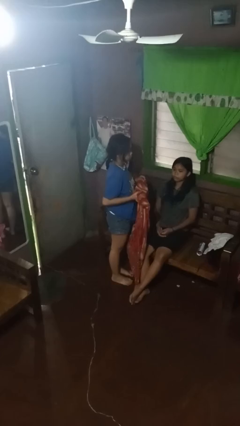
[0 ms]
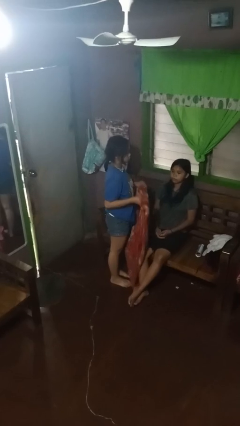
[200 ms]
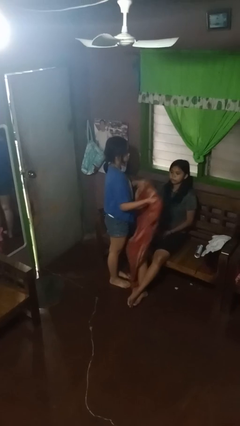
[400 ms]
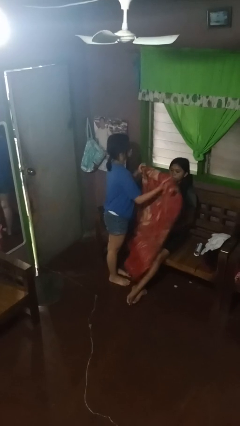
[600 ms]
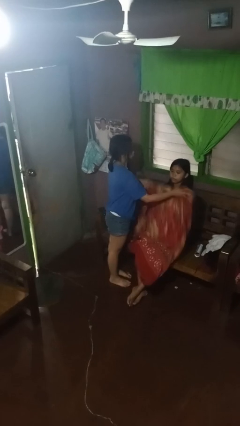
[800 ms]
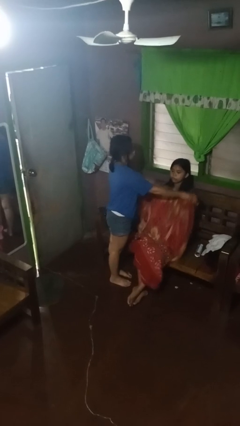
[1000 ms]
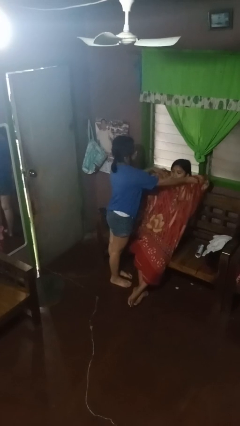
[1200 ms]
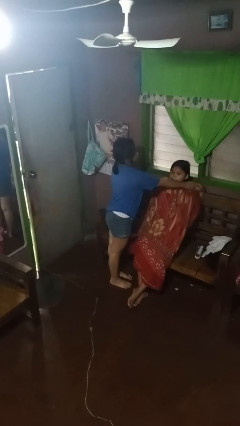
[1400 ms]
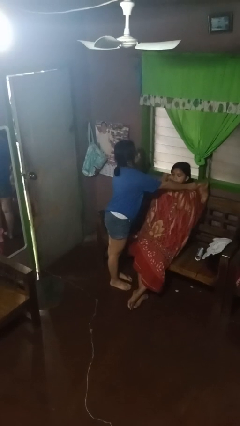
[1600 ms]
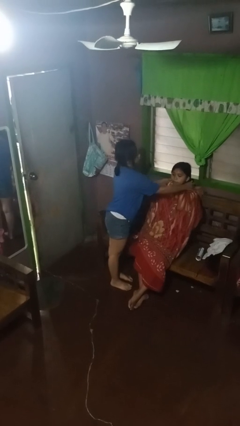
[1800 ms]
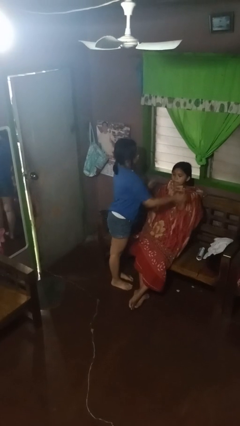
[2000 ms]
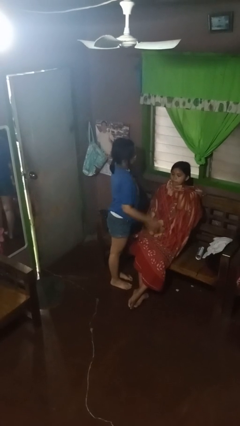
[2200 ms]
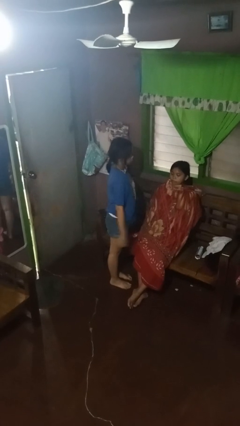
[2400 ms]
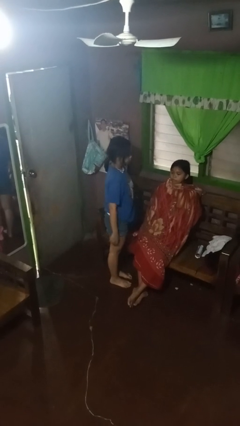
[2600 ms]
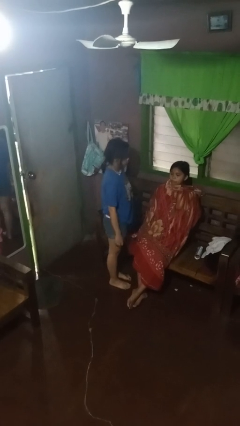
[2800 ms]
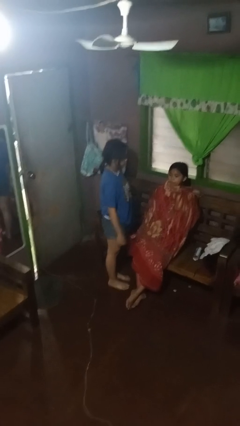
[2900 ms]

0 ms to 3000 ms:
person covers friend with blanket

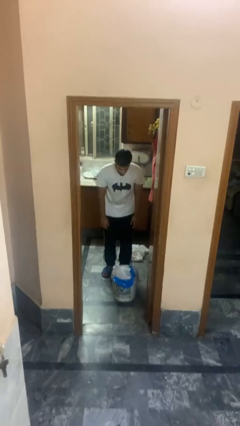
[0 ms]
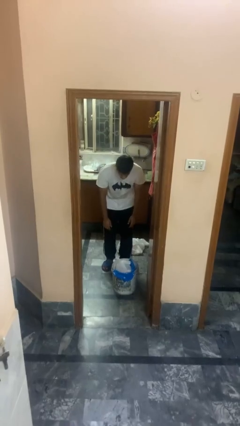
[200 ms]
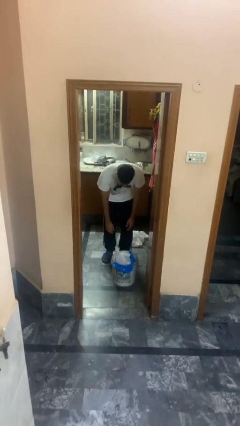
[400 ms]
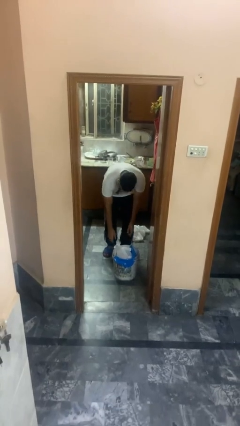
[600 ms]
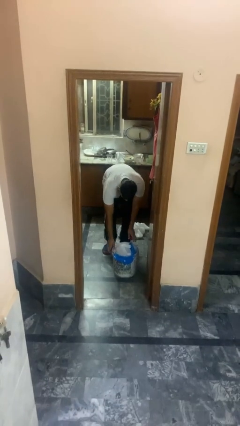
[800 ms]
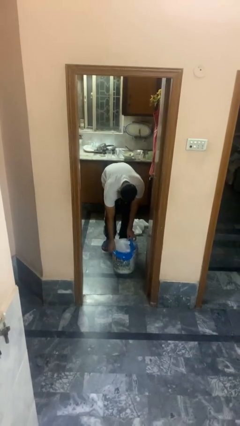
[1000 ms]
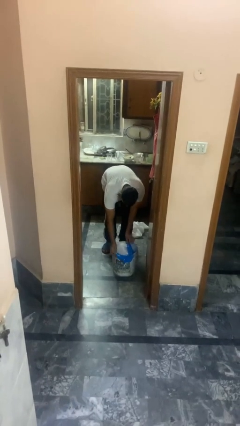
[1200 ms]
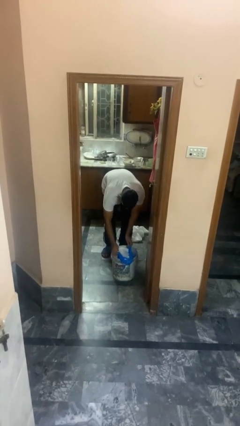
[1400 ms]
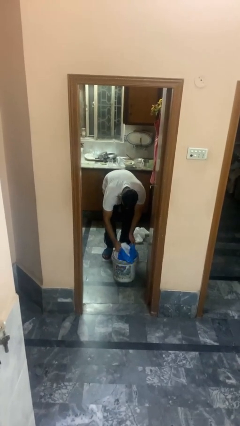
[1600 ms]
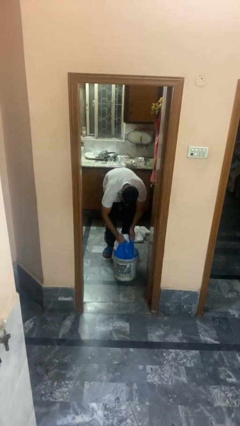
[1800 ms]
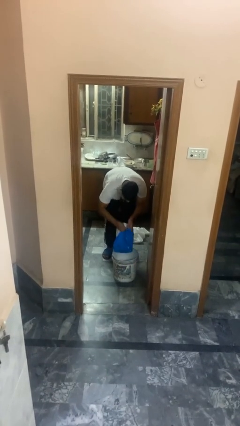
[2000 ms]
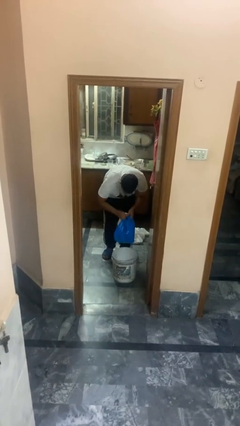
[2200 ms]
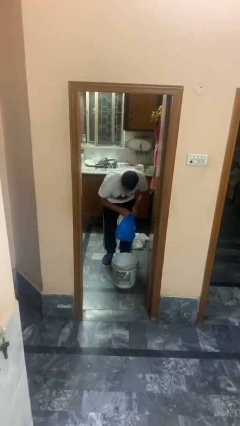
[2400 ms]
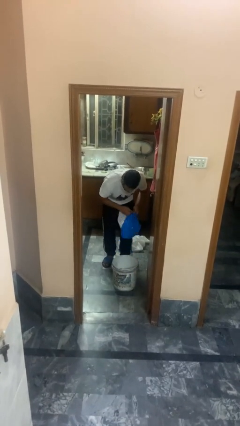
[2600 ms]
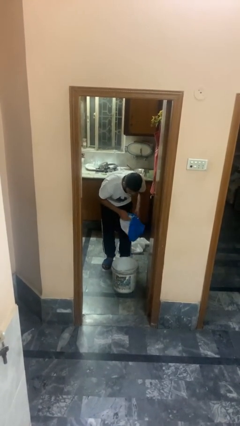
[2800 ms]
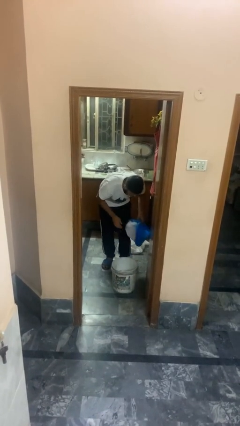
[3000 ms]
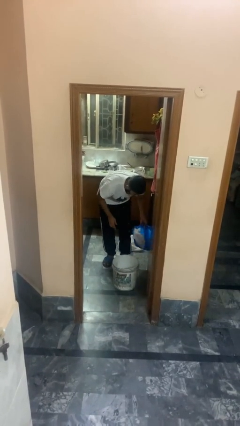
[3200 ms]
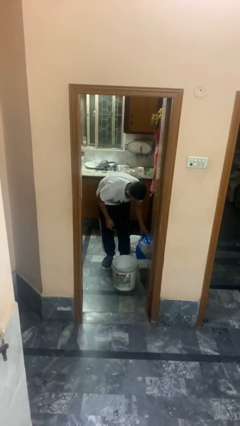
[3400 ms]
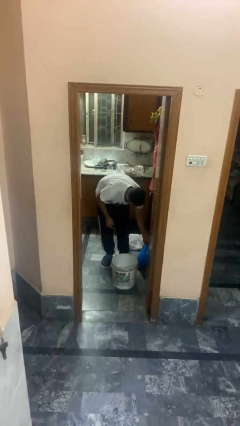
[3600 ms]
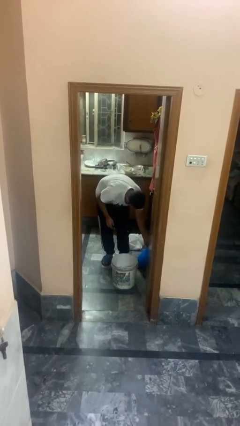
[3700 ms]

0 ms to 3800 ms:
person removes trashbag from trashcan

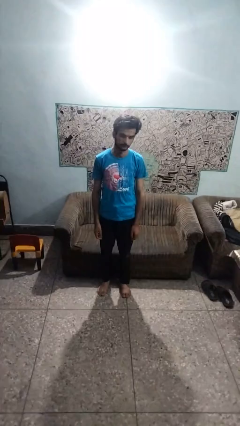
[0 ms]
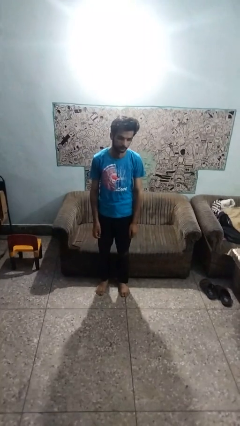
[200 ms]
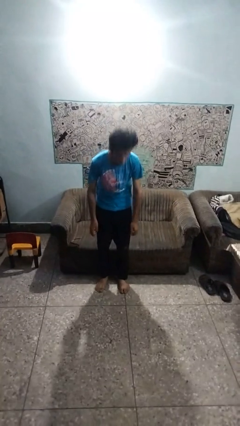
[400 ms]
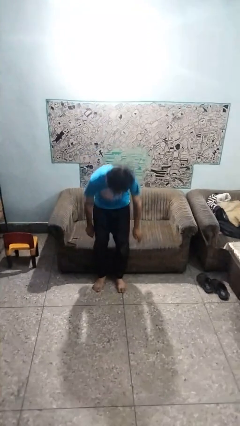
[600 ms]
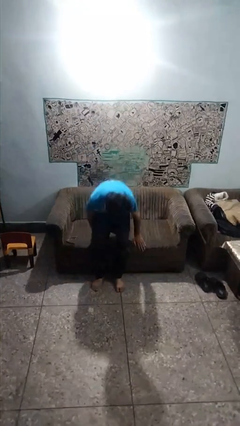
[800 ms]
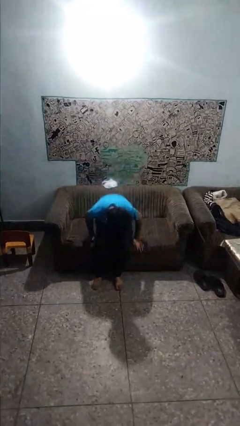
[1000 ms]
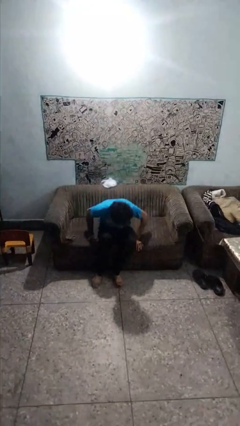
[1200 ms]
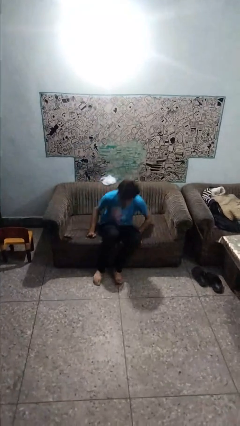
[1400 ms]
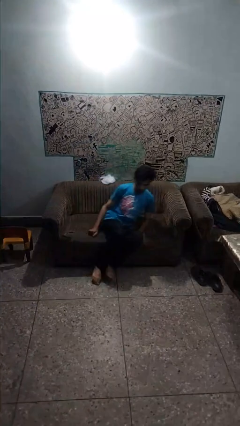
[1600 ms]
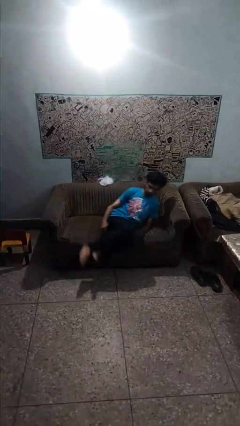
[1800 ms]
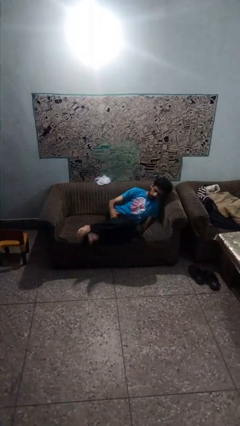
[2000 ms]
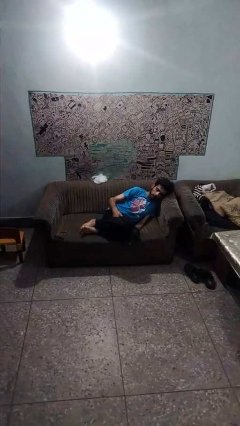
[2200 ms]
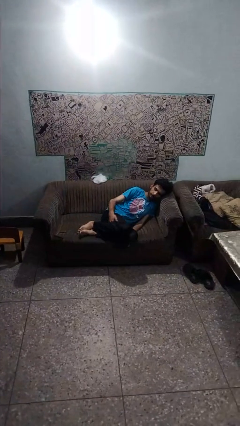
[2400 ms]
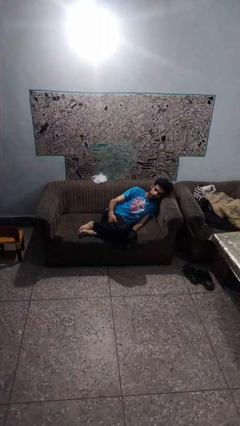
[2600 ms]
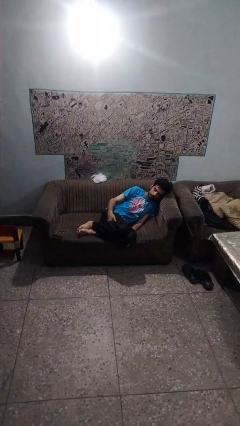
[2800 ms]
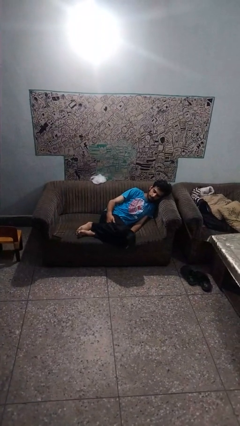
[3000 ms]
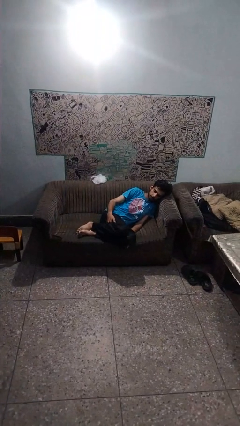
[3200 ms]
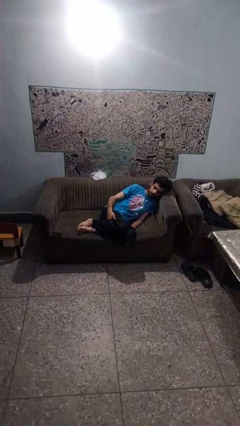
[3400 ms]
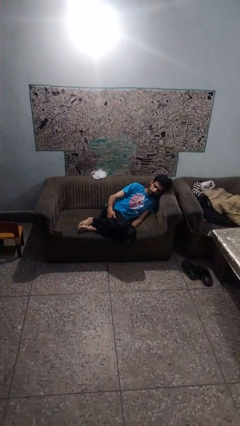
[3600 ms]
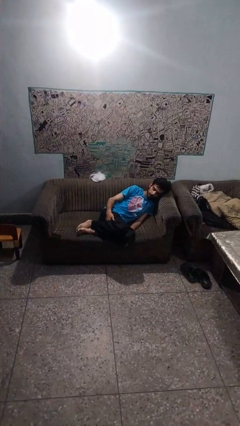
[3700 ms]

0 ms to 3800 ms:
person lies down on couch

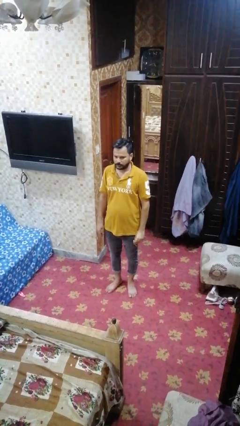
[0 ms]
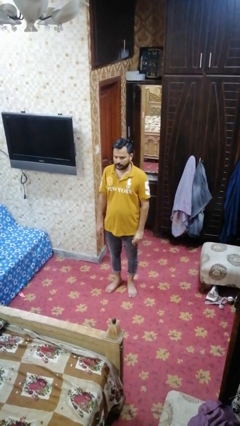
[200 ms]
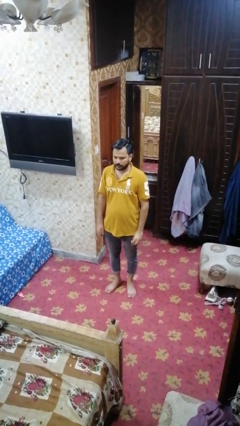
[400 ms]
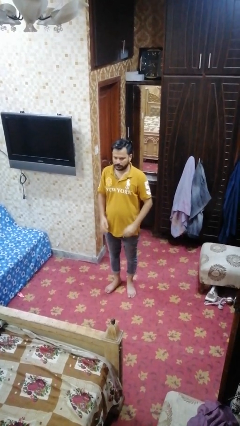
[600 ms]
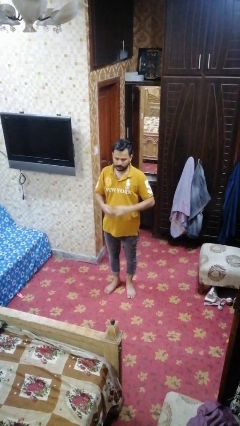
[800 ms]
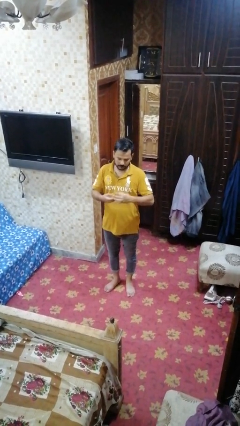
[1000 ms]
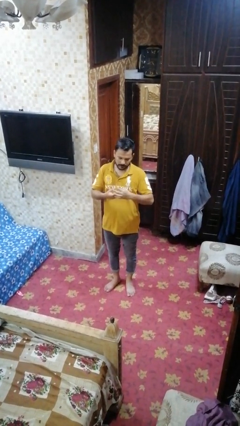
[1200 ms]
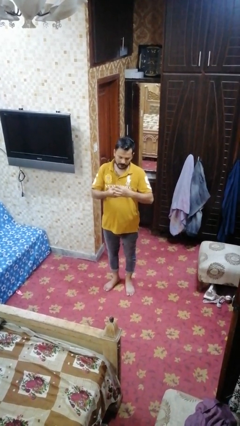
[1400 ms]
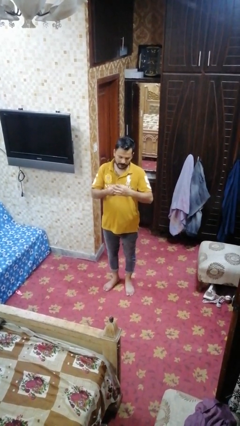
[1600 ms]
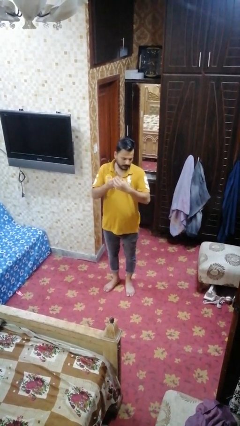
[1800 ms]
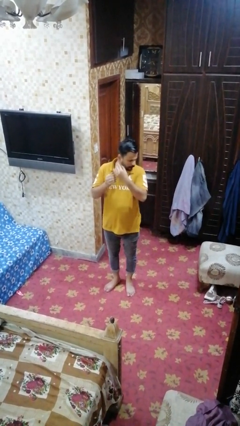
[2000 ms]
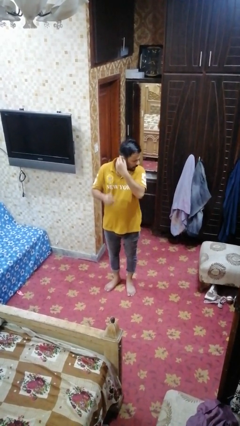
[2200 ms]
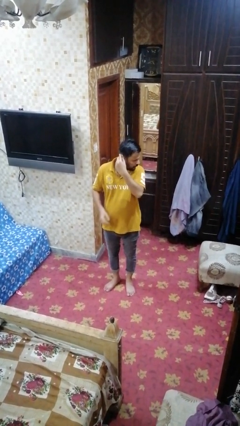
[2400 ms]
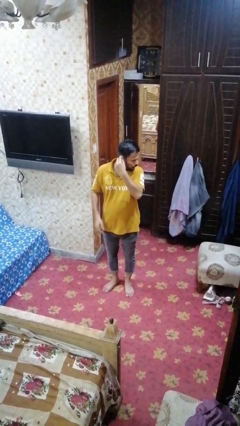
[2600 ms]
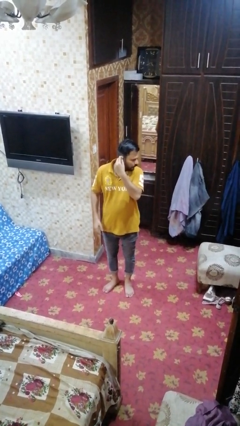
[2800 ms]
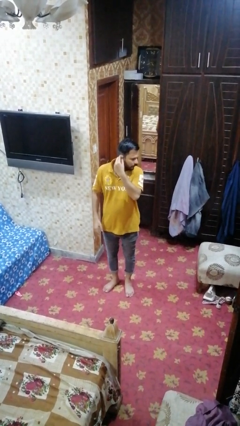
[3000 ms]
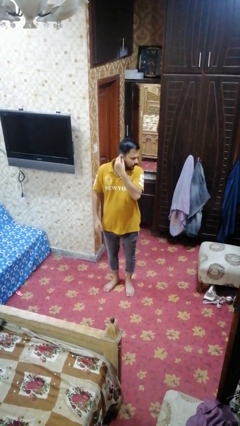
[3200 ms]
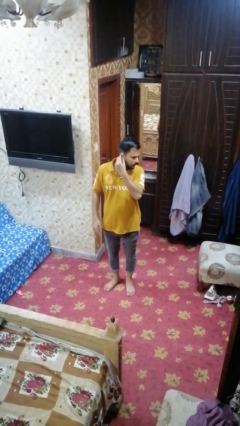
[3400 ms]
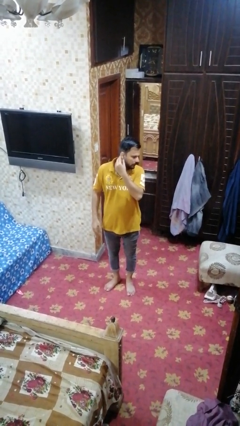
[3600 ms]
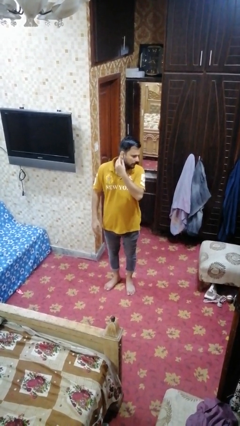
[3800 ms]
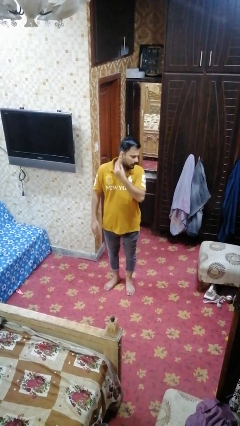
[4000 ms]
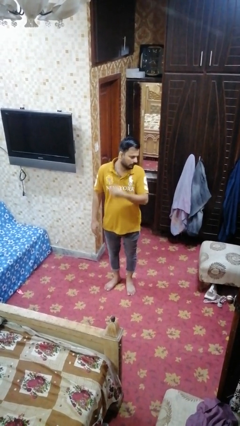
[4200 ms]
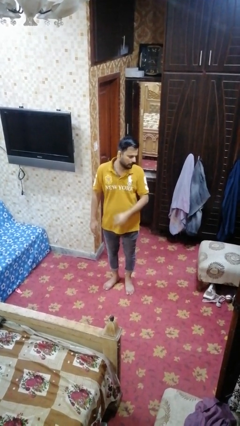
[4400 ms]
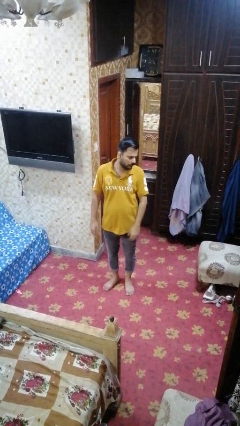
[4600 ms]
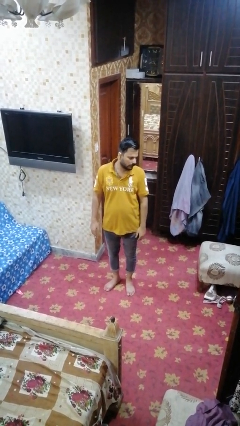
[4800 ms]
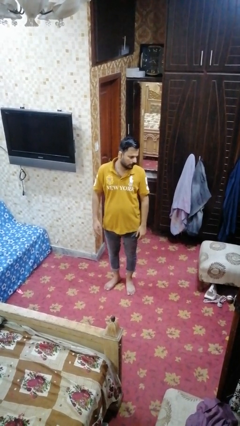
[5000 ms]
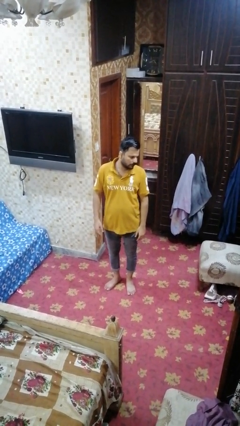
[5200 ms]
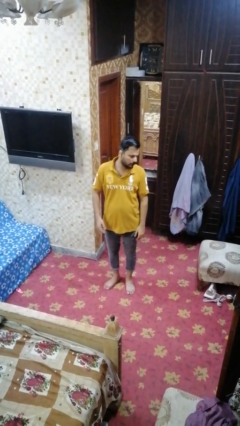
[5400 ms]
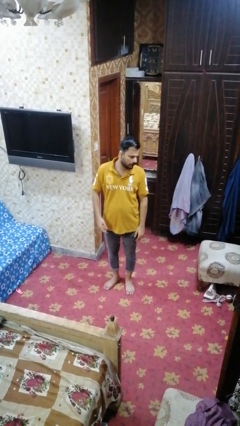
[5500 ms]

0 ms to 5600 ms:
person puts on earrings

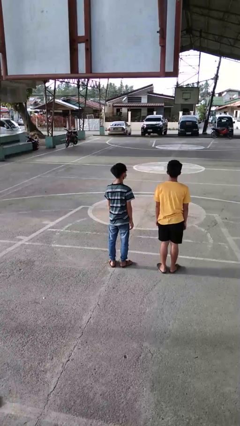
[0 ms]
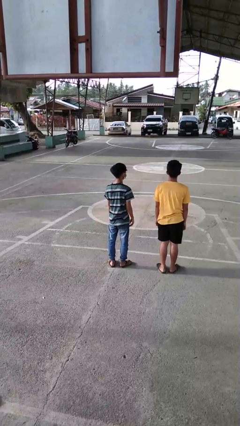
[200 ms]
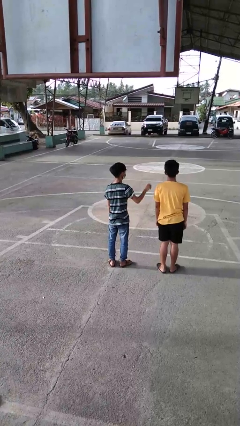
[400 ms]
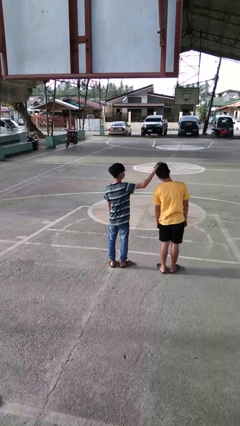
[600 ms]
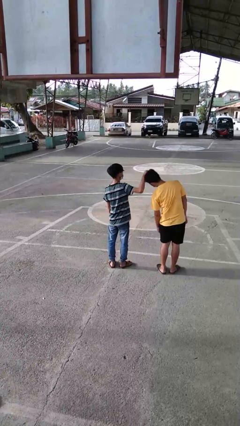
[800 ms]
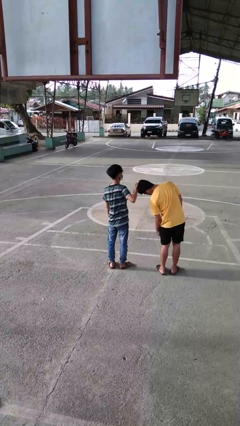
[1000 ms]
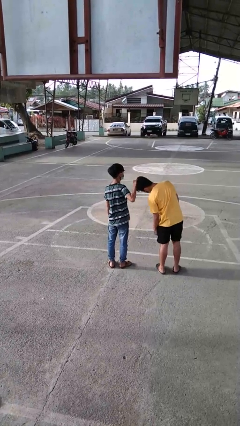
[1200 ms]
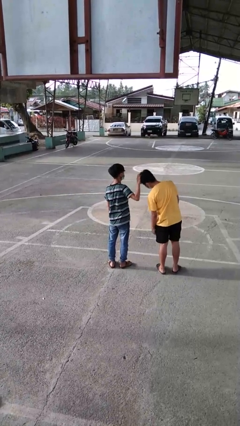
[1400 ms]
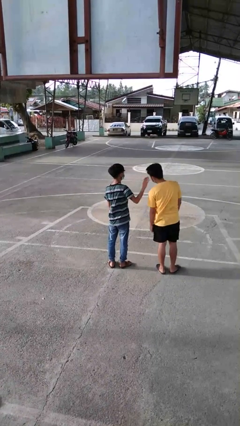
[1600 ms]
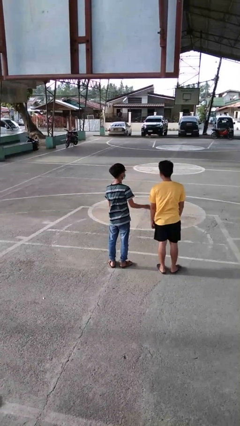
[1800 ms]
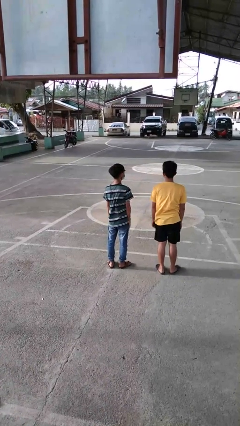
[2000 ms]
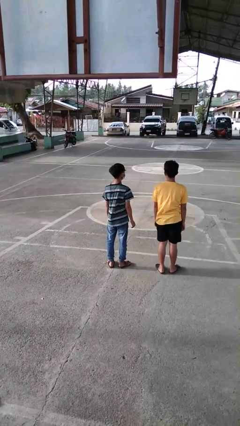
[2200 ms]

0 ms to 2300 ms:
person grabs person by hair
